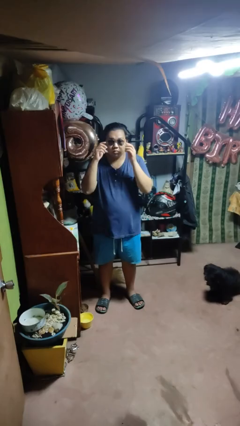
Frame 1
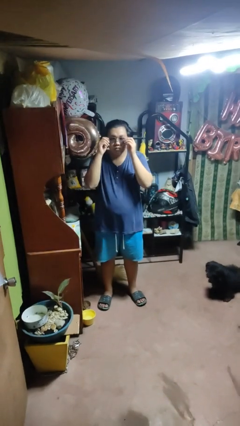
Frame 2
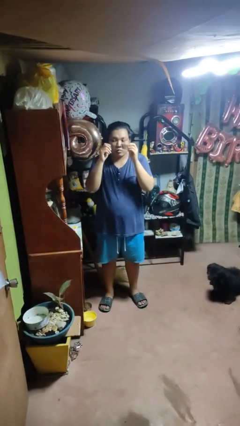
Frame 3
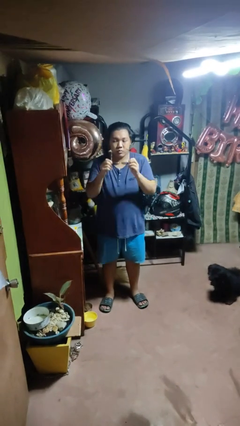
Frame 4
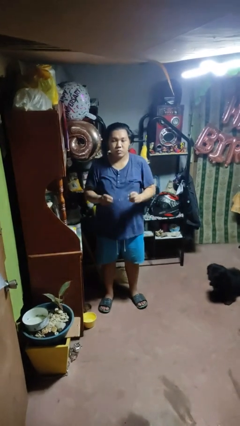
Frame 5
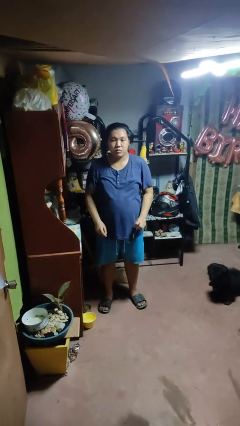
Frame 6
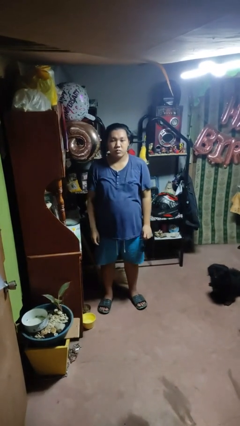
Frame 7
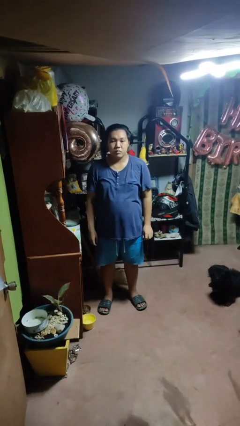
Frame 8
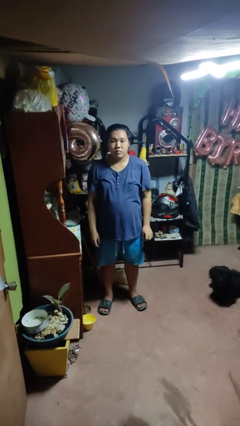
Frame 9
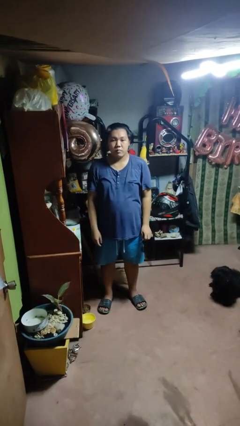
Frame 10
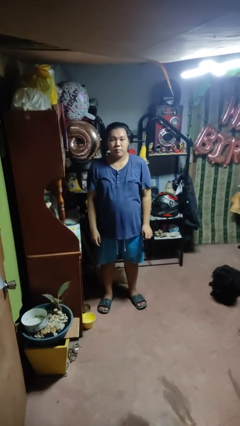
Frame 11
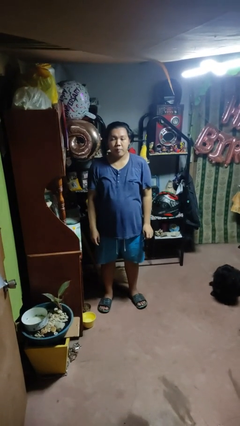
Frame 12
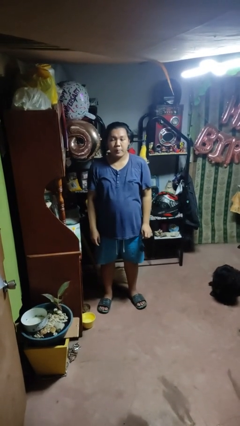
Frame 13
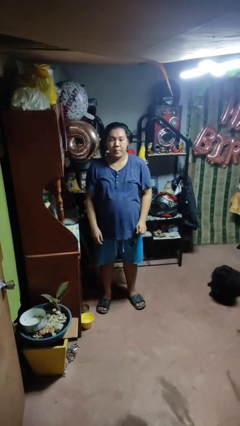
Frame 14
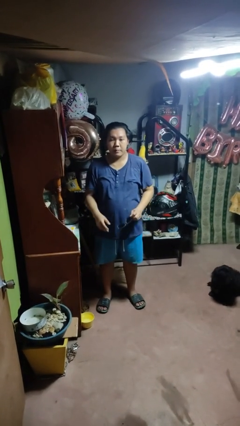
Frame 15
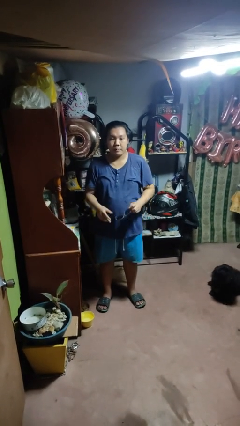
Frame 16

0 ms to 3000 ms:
person takes off sunglasses

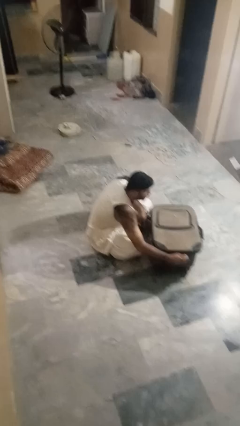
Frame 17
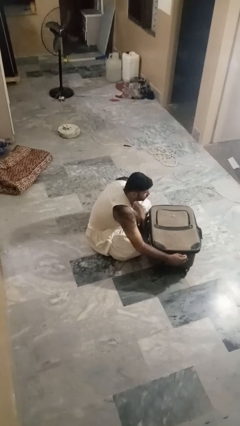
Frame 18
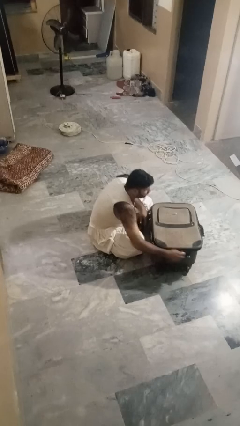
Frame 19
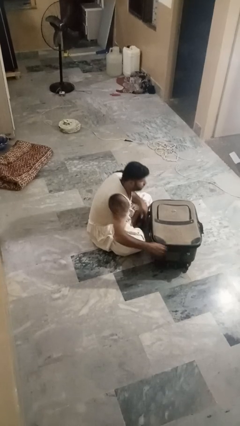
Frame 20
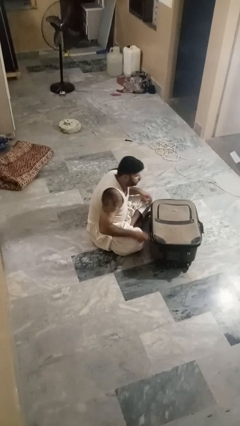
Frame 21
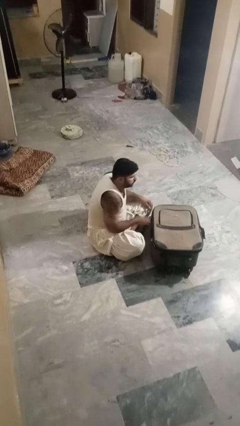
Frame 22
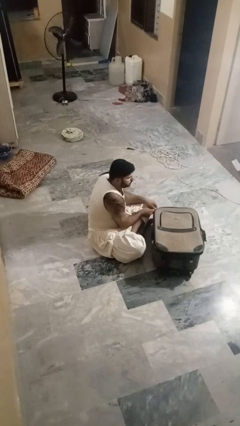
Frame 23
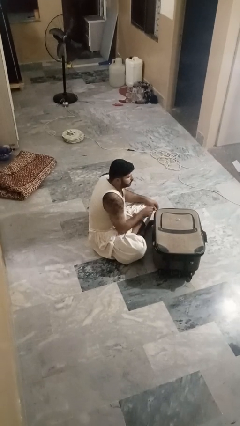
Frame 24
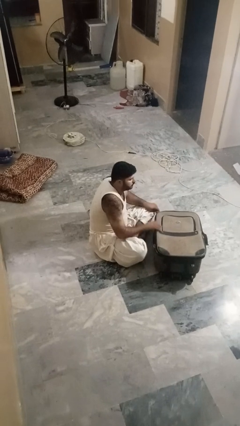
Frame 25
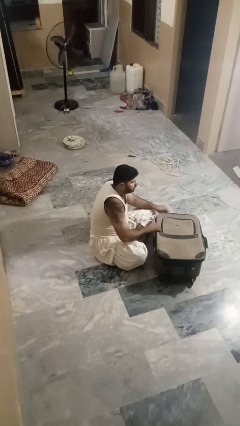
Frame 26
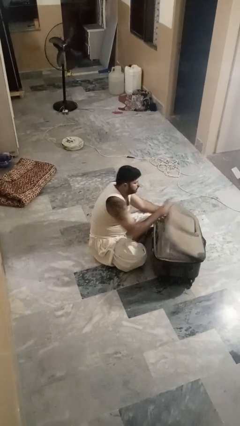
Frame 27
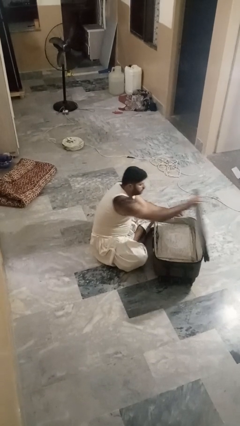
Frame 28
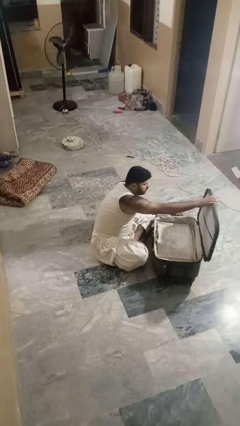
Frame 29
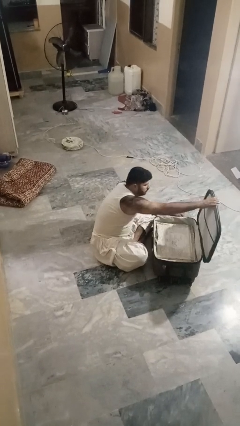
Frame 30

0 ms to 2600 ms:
person opens suitcase

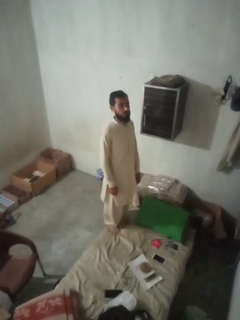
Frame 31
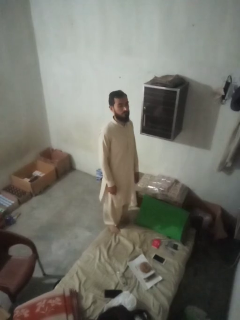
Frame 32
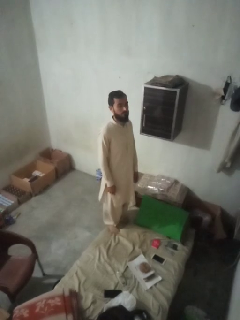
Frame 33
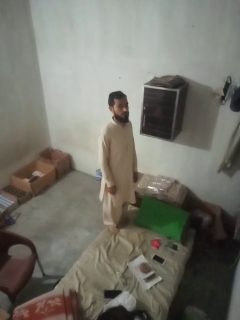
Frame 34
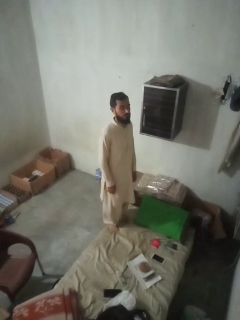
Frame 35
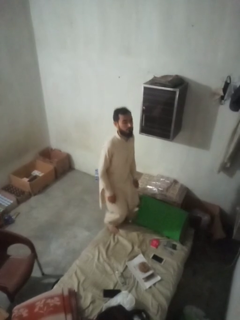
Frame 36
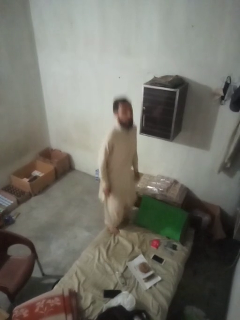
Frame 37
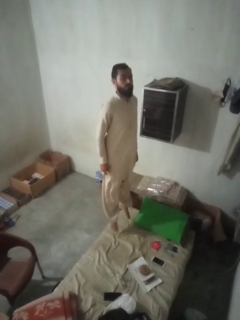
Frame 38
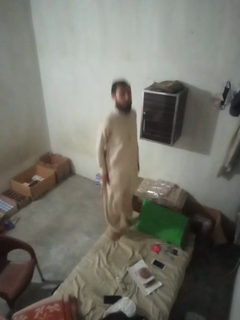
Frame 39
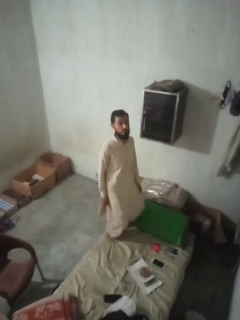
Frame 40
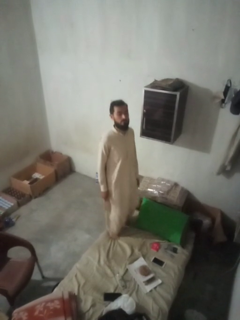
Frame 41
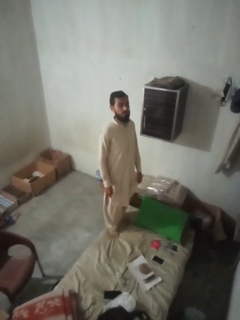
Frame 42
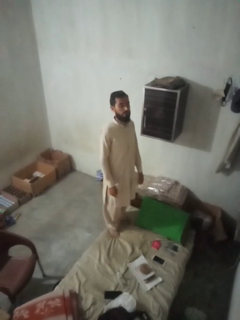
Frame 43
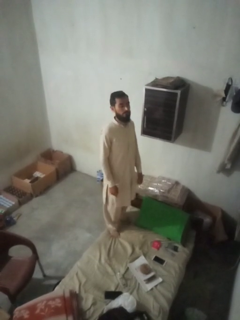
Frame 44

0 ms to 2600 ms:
person jumps on couch

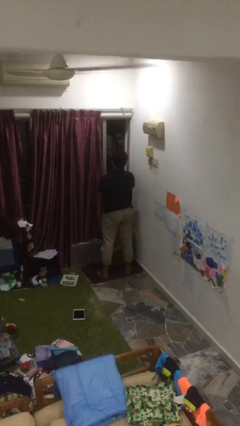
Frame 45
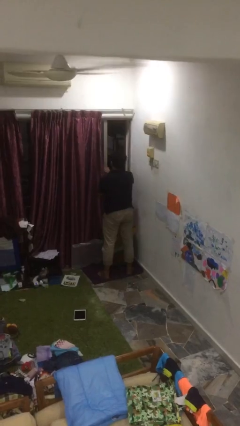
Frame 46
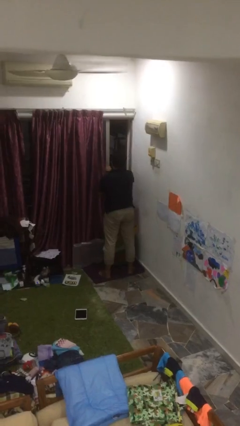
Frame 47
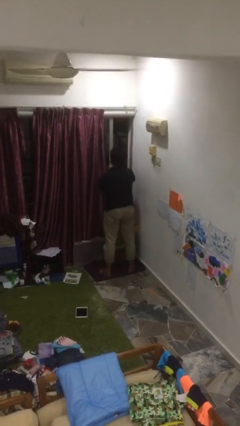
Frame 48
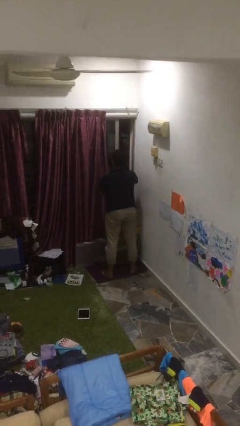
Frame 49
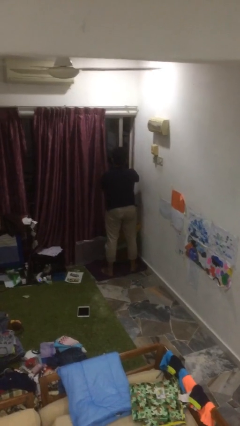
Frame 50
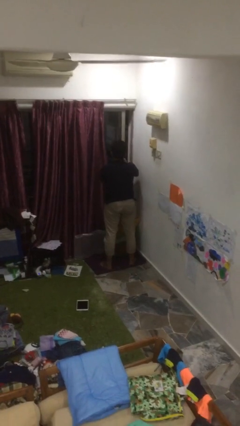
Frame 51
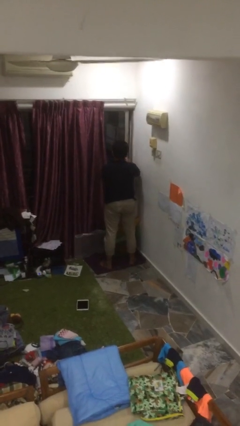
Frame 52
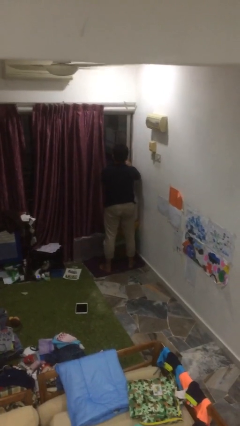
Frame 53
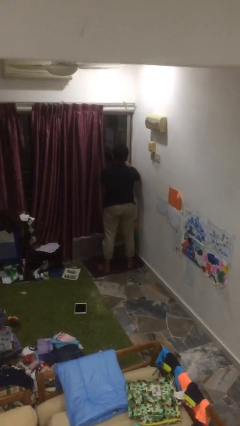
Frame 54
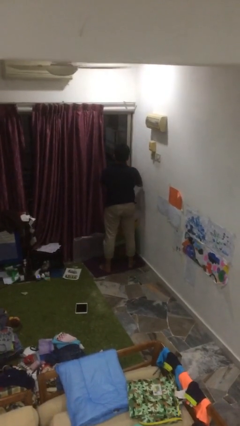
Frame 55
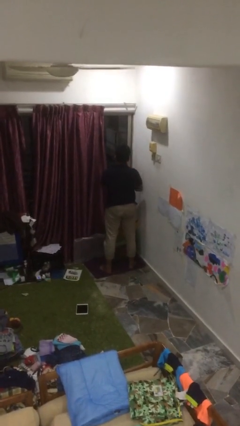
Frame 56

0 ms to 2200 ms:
person closes home window

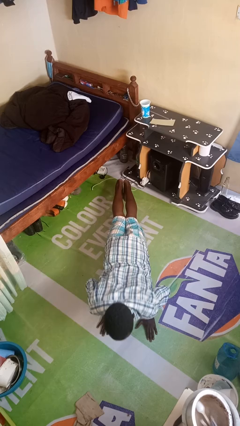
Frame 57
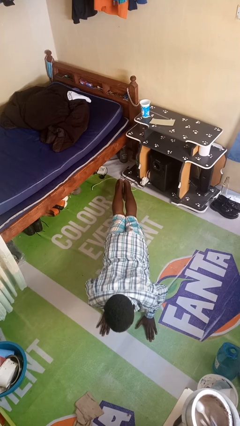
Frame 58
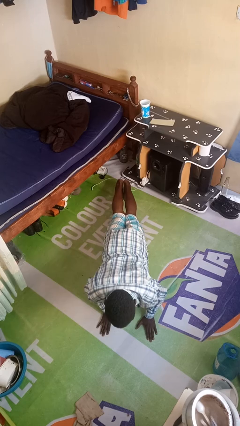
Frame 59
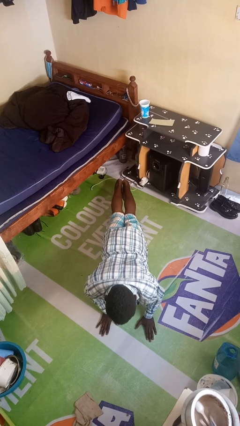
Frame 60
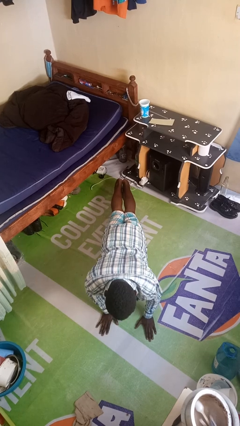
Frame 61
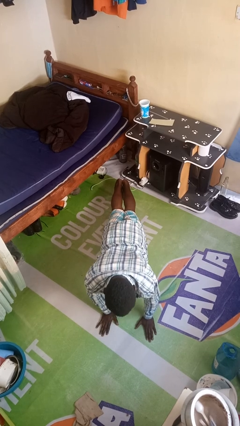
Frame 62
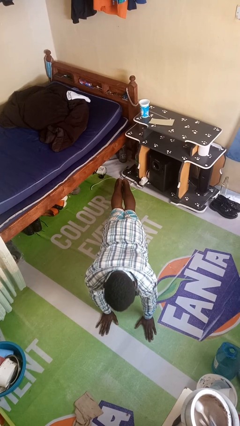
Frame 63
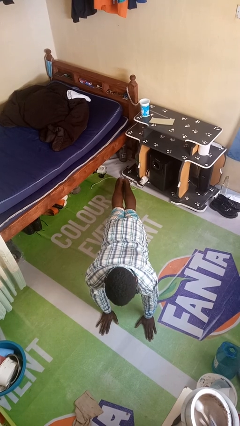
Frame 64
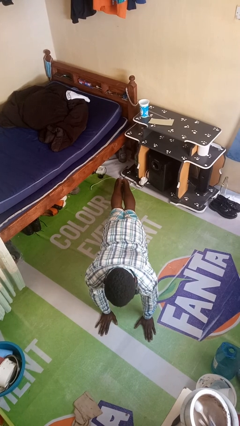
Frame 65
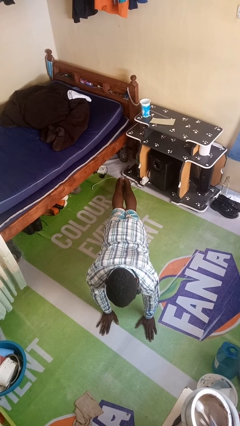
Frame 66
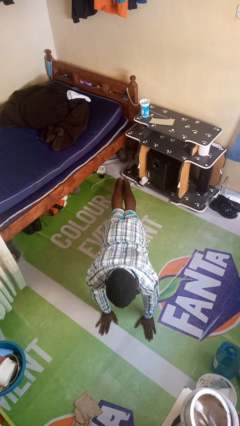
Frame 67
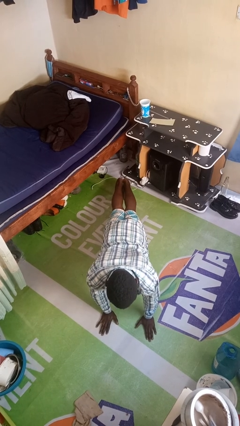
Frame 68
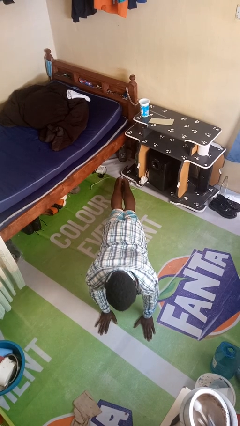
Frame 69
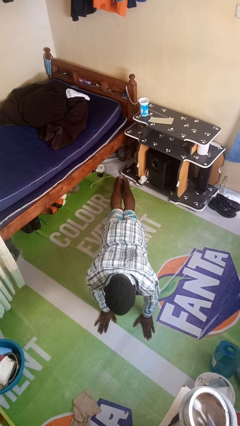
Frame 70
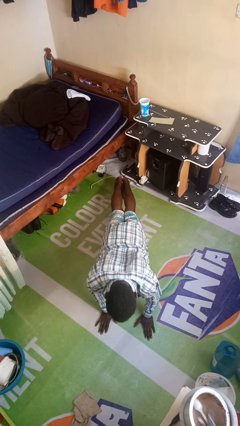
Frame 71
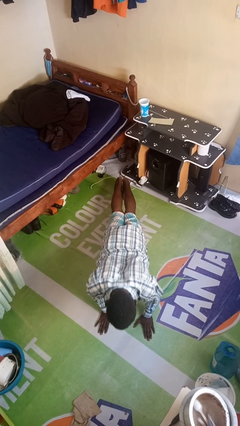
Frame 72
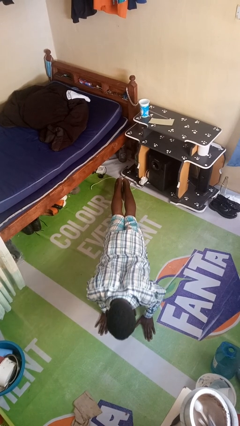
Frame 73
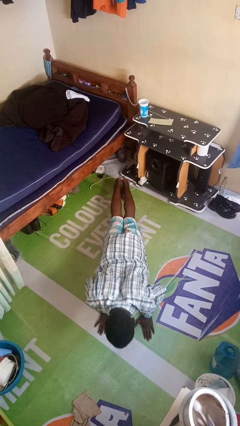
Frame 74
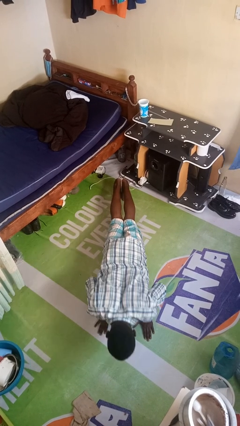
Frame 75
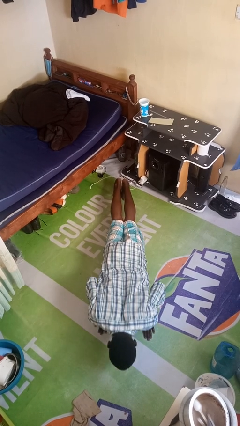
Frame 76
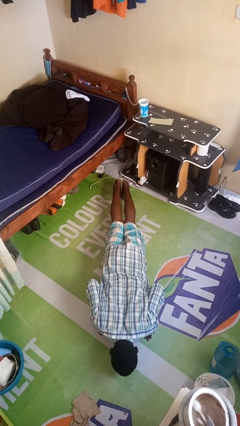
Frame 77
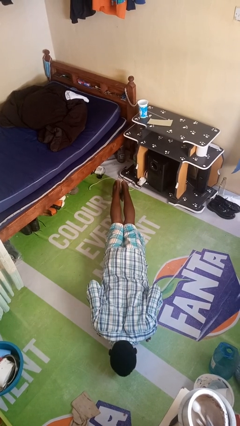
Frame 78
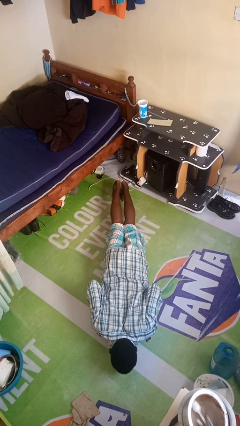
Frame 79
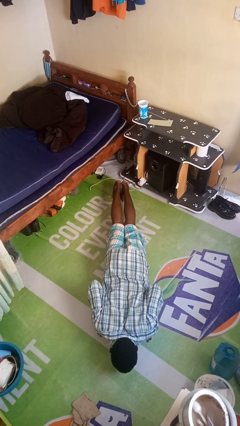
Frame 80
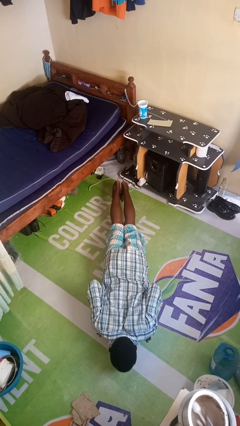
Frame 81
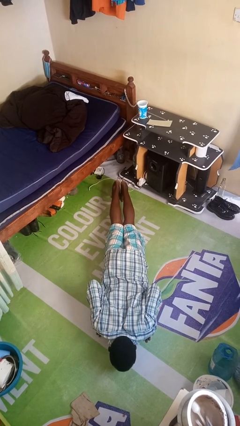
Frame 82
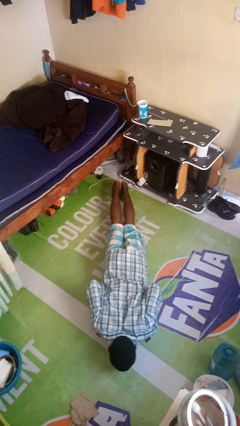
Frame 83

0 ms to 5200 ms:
person exercises with pushup

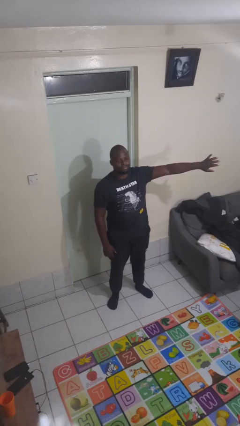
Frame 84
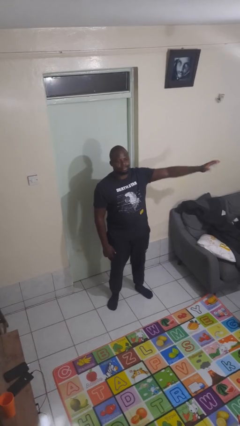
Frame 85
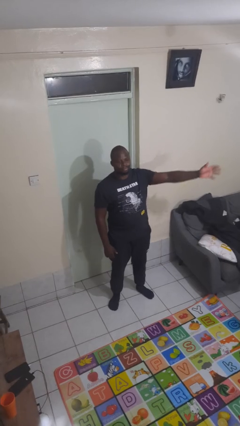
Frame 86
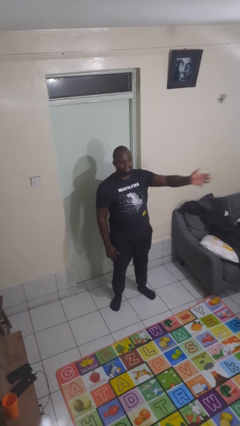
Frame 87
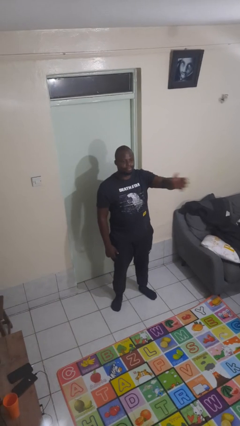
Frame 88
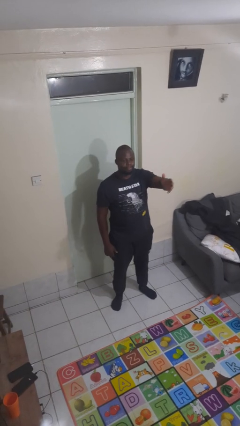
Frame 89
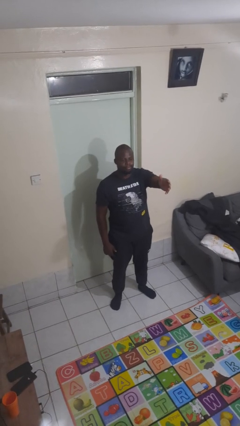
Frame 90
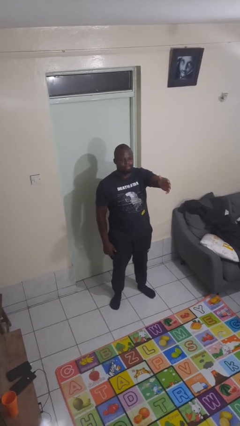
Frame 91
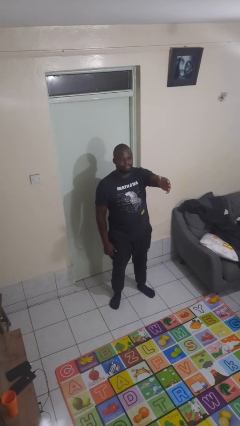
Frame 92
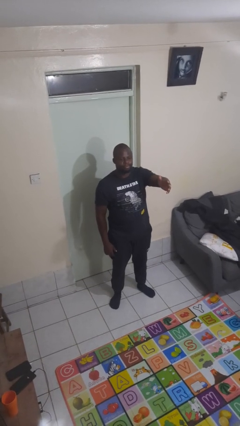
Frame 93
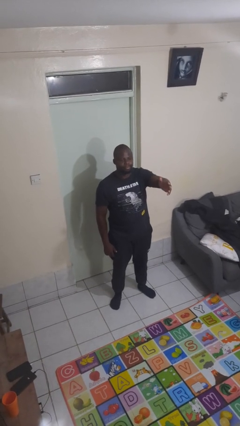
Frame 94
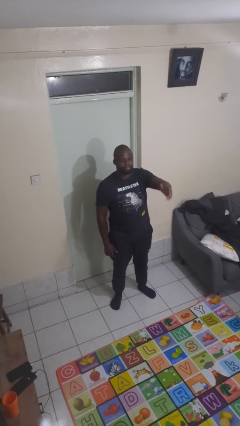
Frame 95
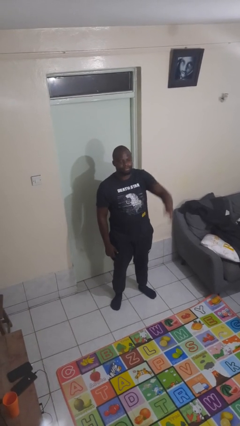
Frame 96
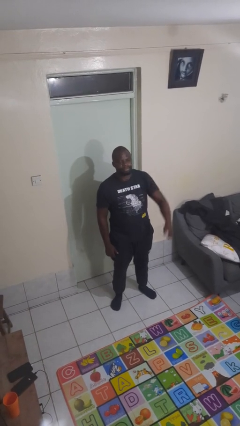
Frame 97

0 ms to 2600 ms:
person gestures swipe right
